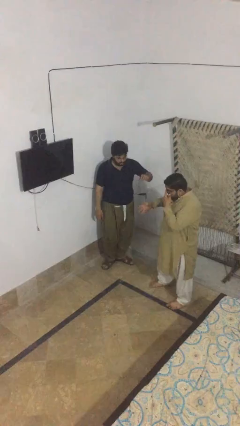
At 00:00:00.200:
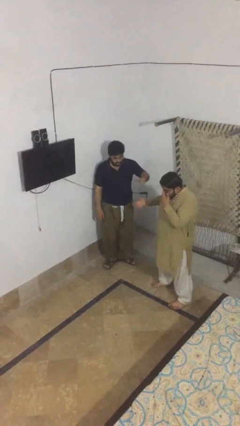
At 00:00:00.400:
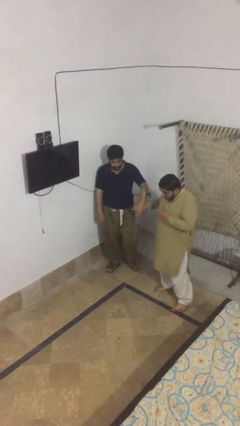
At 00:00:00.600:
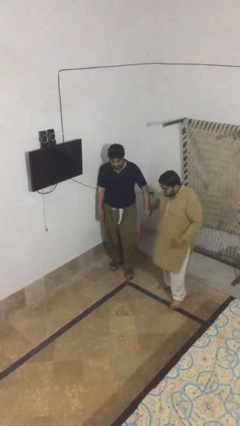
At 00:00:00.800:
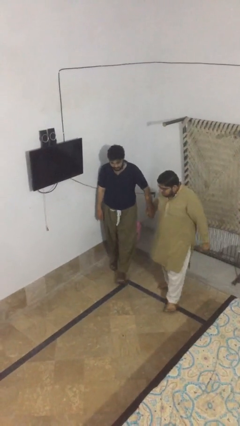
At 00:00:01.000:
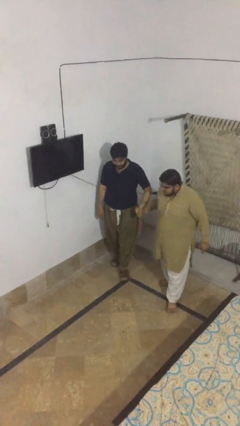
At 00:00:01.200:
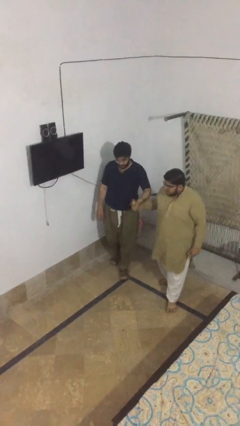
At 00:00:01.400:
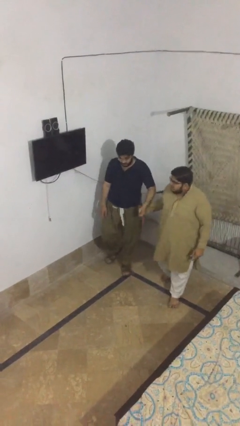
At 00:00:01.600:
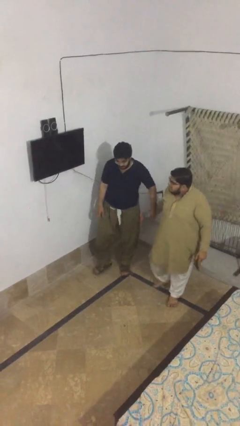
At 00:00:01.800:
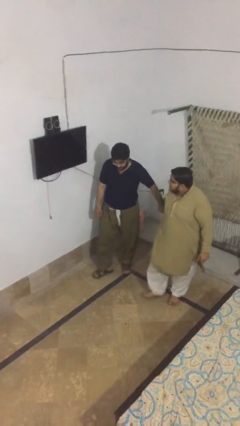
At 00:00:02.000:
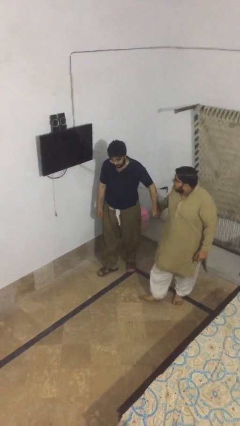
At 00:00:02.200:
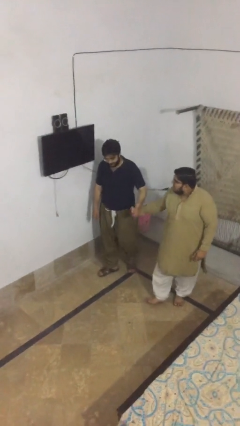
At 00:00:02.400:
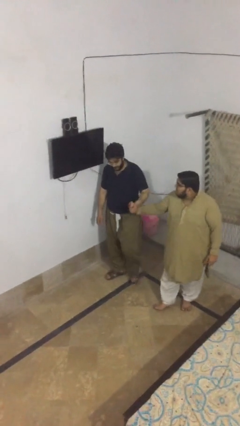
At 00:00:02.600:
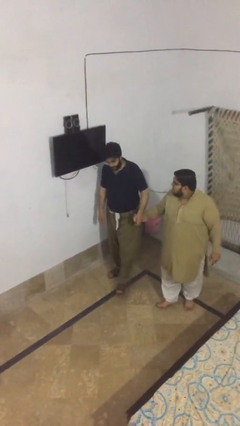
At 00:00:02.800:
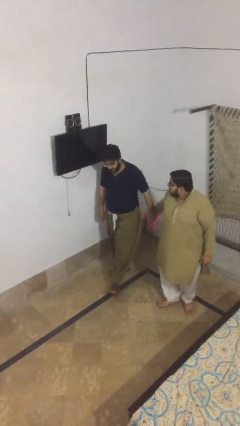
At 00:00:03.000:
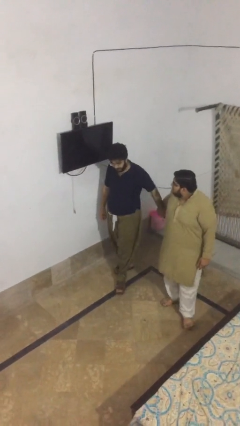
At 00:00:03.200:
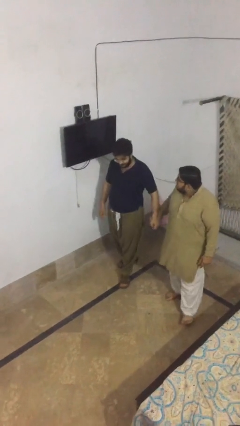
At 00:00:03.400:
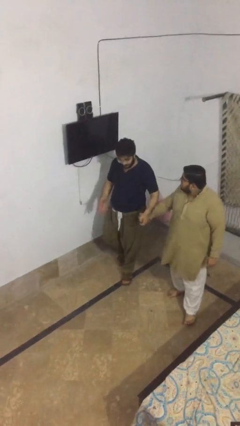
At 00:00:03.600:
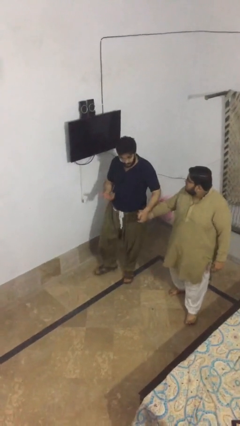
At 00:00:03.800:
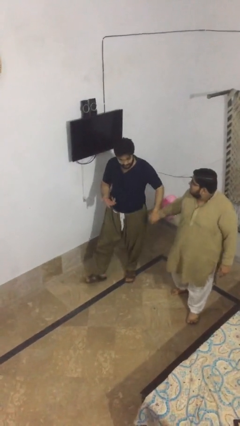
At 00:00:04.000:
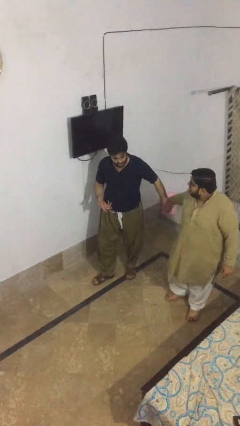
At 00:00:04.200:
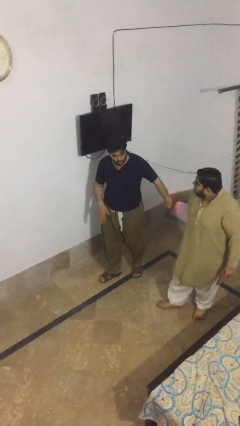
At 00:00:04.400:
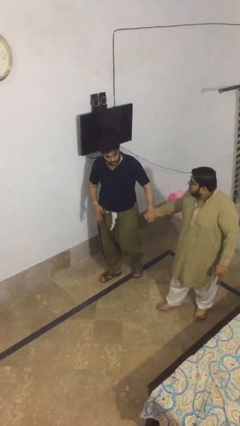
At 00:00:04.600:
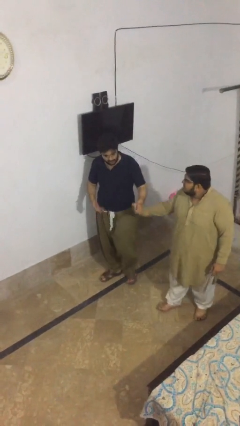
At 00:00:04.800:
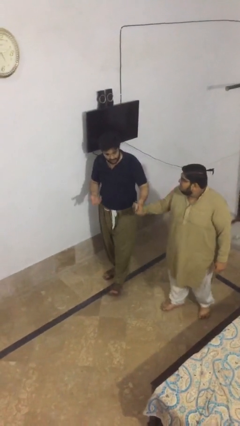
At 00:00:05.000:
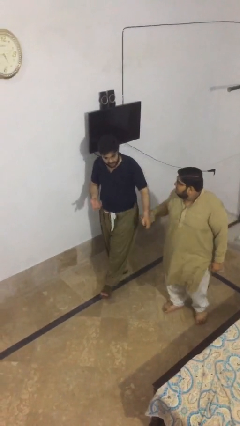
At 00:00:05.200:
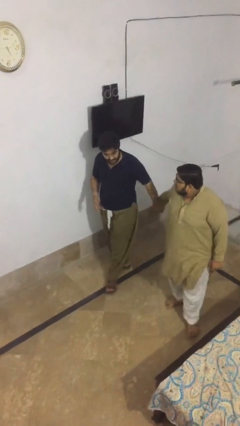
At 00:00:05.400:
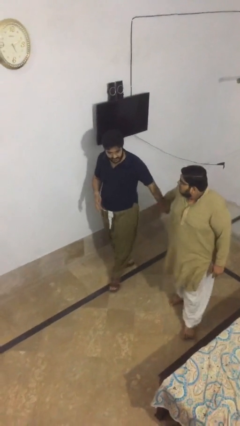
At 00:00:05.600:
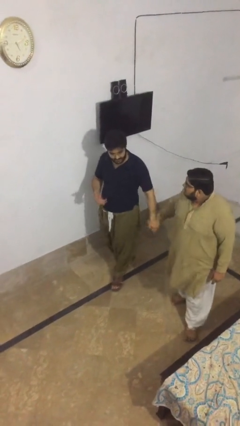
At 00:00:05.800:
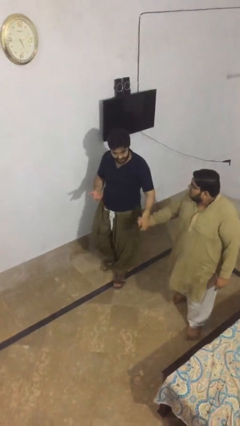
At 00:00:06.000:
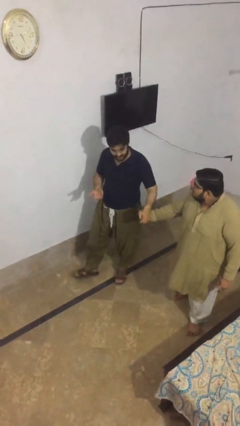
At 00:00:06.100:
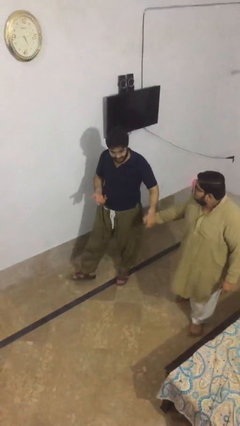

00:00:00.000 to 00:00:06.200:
person holds hand

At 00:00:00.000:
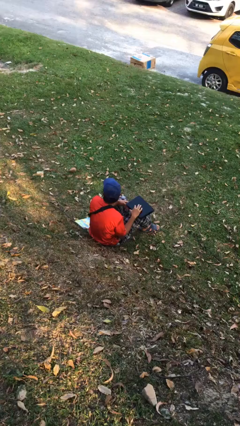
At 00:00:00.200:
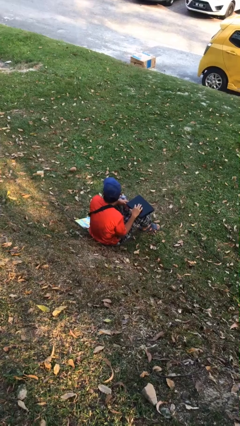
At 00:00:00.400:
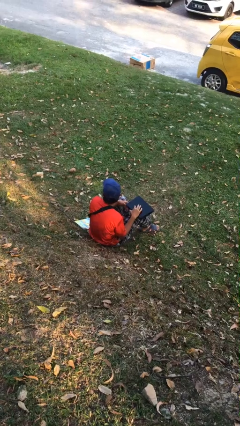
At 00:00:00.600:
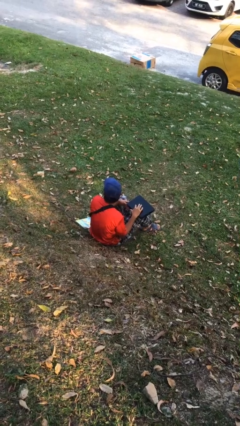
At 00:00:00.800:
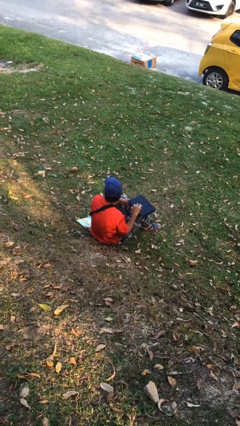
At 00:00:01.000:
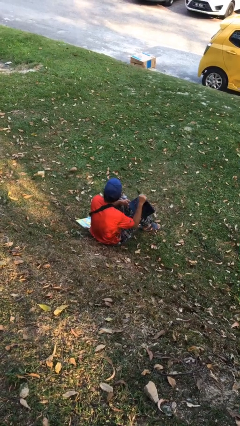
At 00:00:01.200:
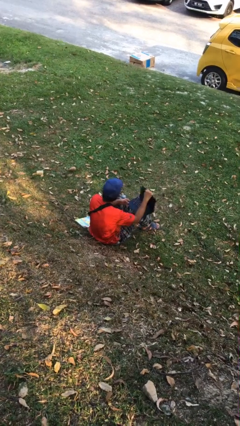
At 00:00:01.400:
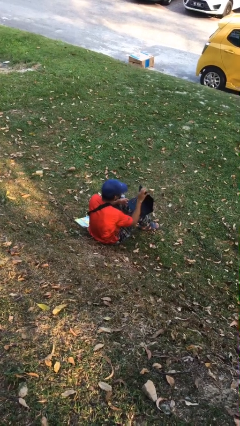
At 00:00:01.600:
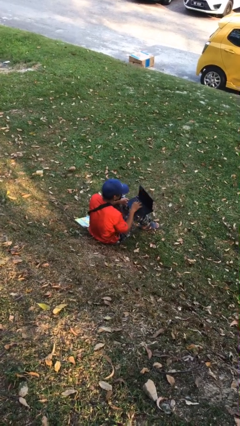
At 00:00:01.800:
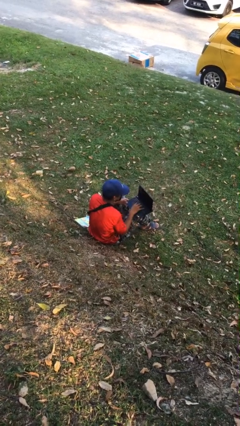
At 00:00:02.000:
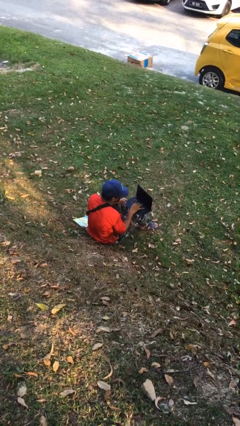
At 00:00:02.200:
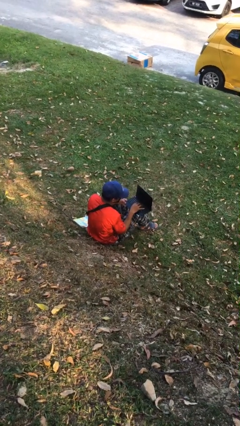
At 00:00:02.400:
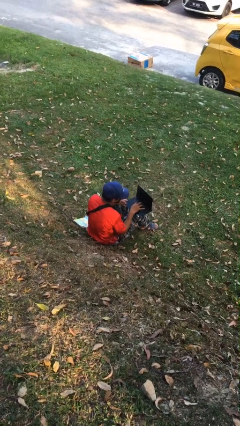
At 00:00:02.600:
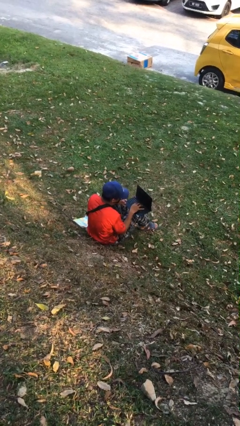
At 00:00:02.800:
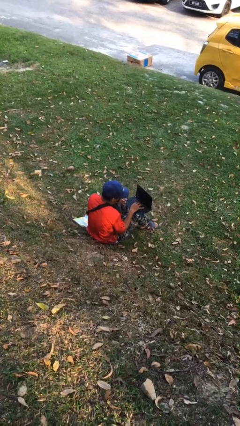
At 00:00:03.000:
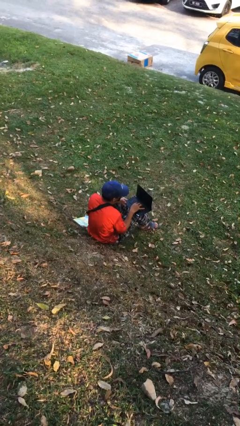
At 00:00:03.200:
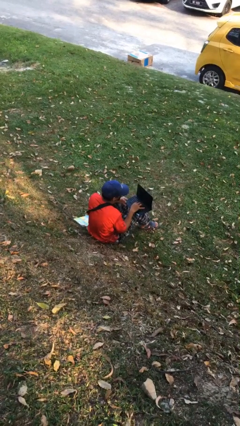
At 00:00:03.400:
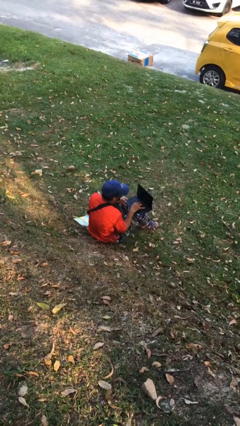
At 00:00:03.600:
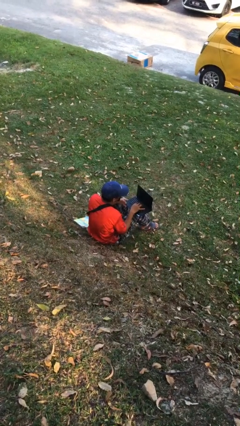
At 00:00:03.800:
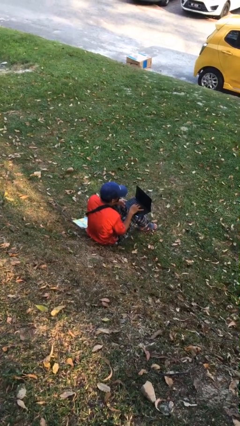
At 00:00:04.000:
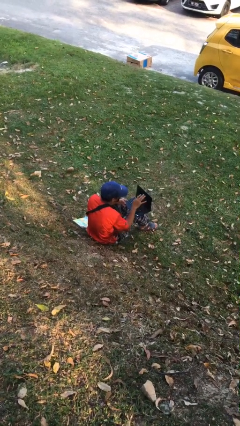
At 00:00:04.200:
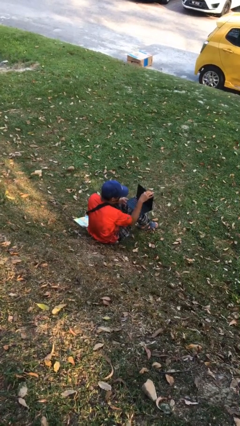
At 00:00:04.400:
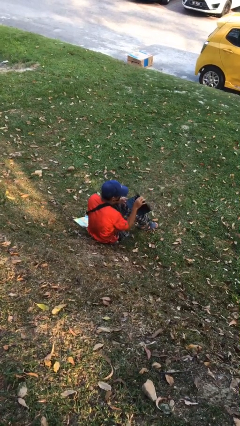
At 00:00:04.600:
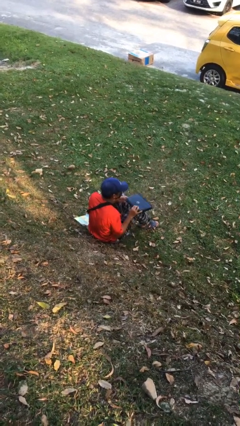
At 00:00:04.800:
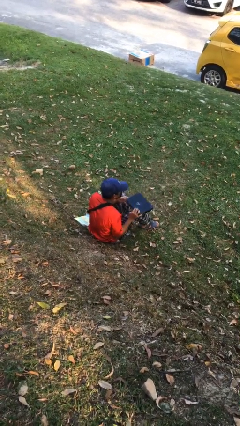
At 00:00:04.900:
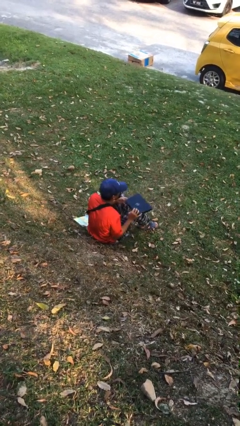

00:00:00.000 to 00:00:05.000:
person interacts with laptop

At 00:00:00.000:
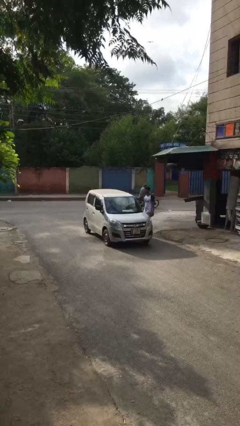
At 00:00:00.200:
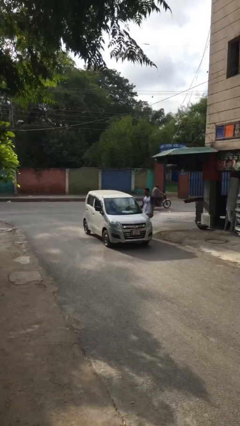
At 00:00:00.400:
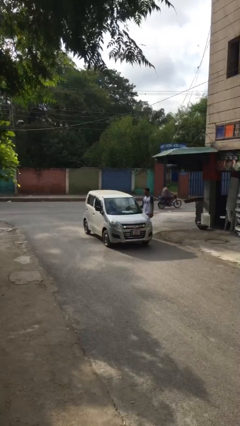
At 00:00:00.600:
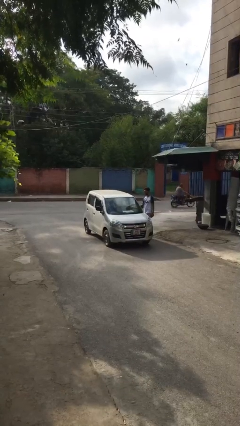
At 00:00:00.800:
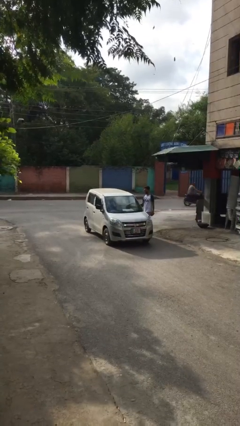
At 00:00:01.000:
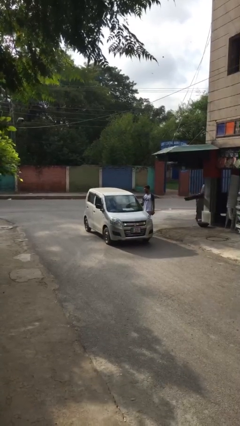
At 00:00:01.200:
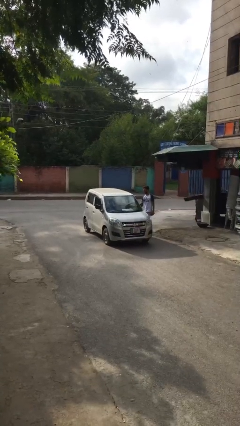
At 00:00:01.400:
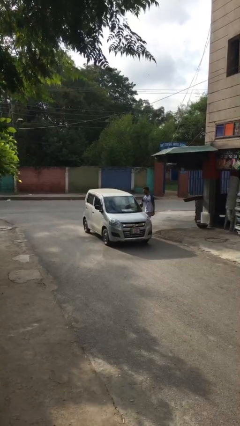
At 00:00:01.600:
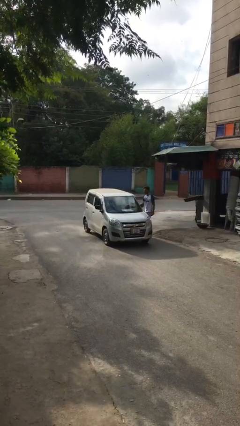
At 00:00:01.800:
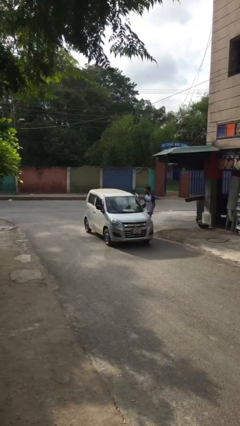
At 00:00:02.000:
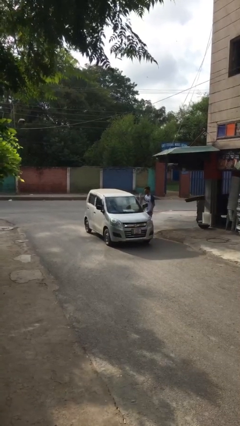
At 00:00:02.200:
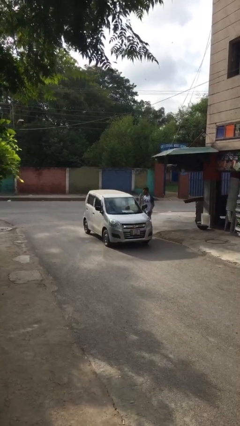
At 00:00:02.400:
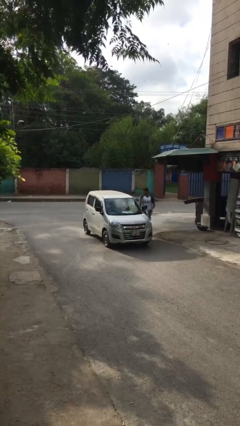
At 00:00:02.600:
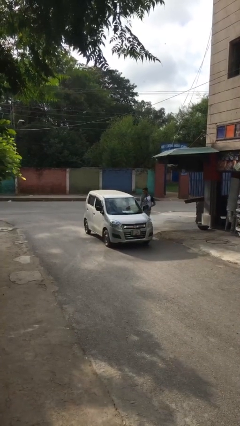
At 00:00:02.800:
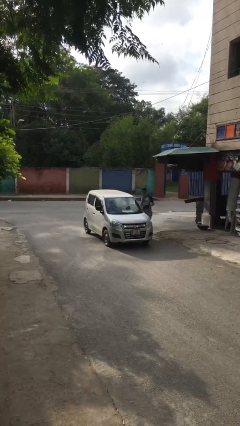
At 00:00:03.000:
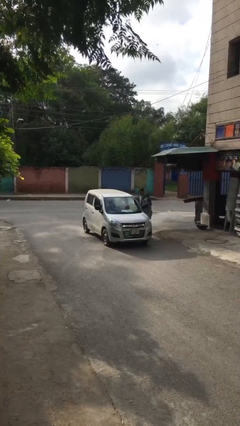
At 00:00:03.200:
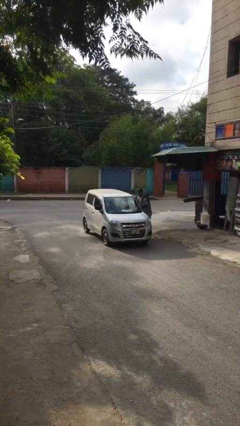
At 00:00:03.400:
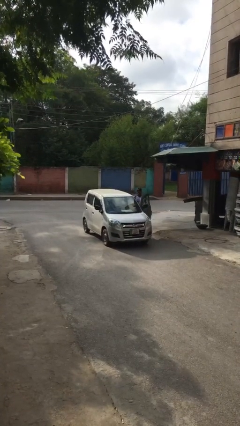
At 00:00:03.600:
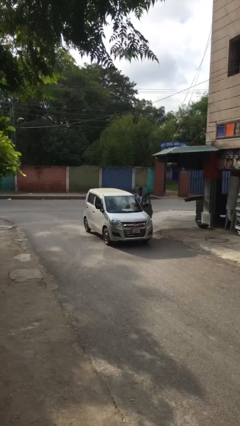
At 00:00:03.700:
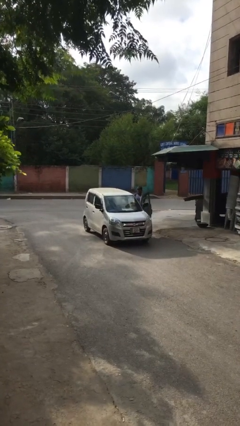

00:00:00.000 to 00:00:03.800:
car picks up person

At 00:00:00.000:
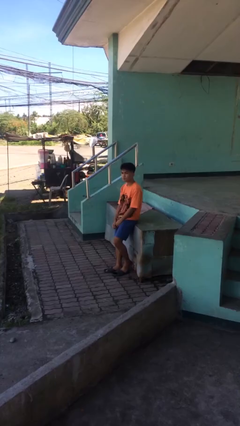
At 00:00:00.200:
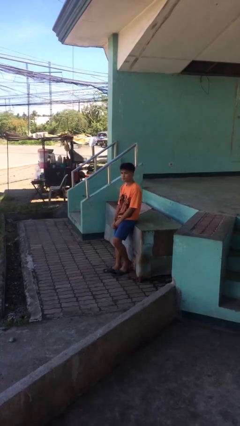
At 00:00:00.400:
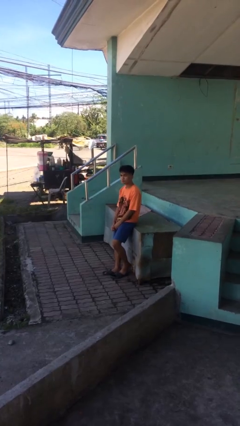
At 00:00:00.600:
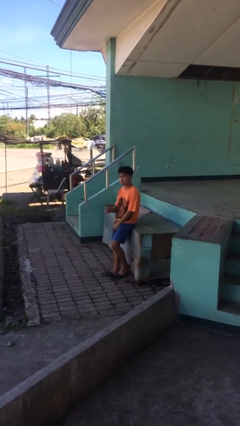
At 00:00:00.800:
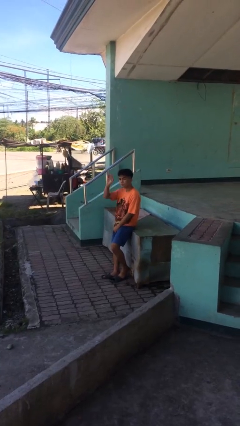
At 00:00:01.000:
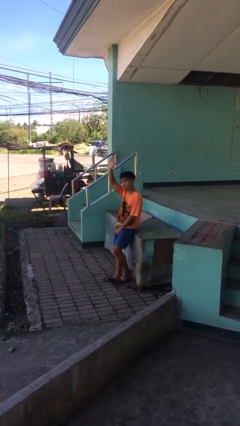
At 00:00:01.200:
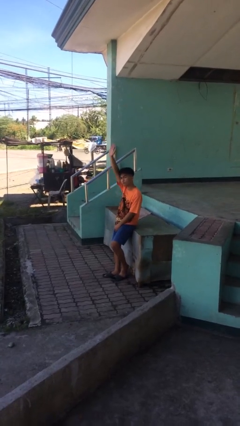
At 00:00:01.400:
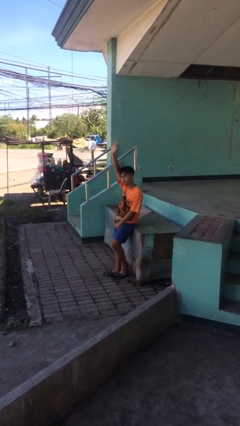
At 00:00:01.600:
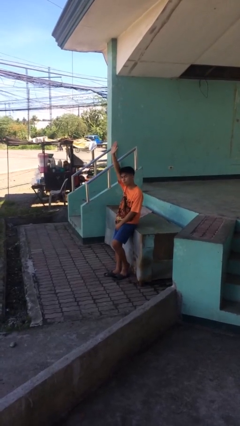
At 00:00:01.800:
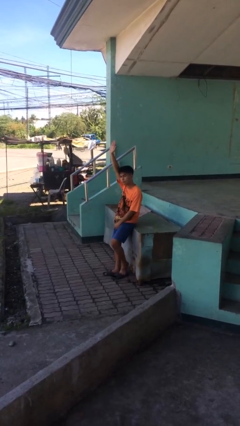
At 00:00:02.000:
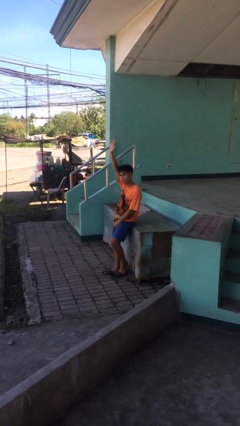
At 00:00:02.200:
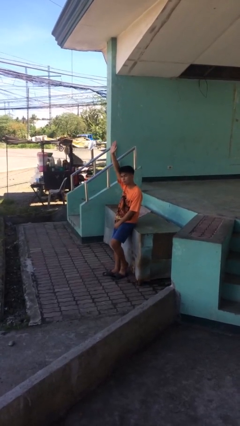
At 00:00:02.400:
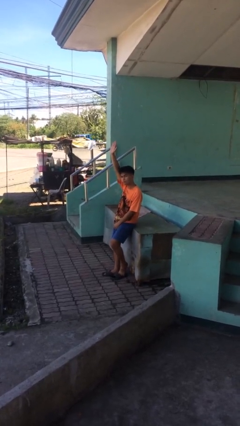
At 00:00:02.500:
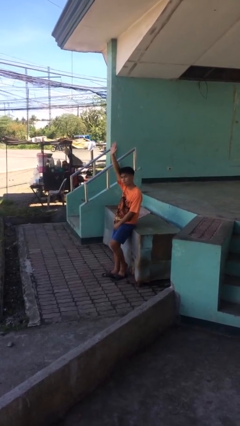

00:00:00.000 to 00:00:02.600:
person gestures raise hand
